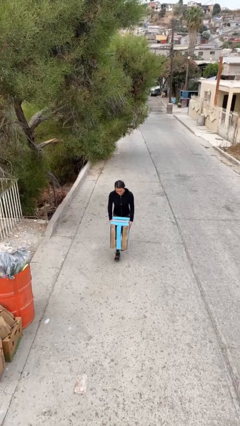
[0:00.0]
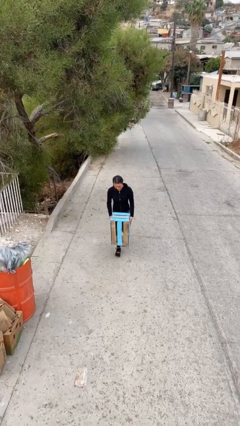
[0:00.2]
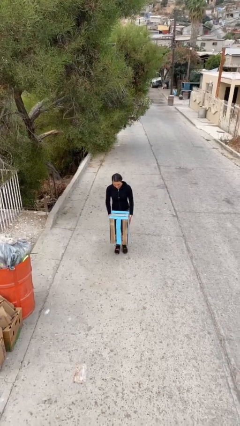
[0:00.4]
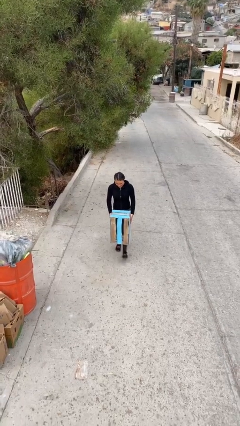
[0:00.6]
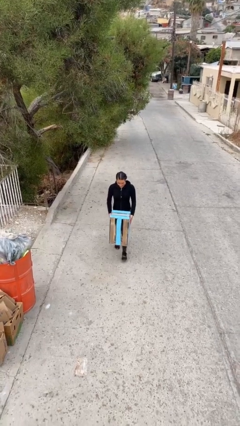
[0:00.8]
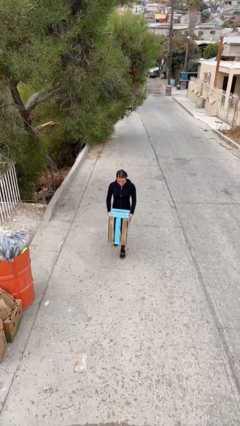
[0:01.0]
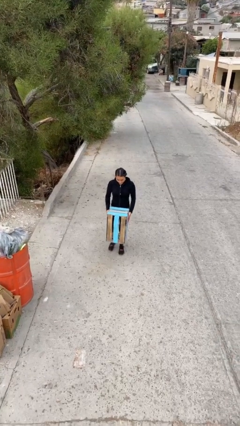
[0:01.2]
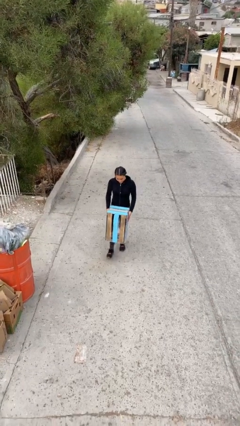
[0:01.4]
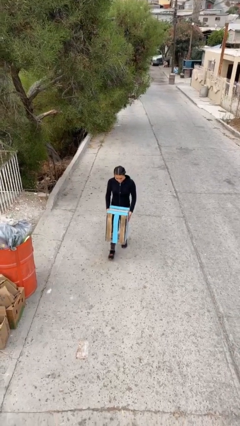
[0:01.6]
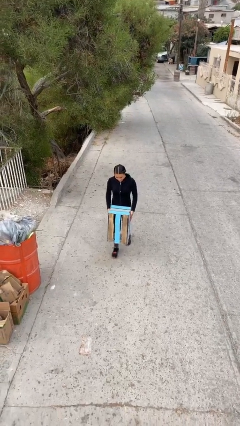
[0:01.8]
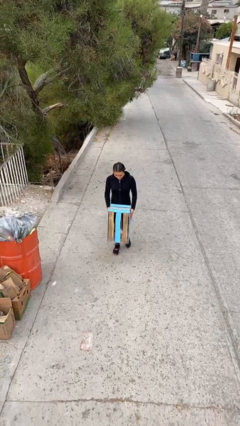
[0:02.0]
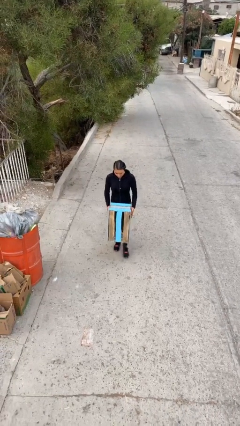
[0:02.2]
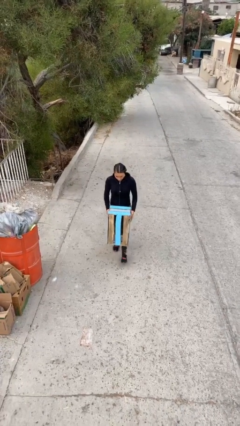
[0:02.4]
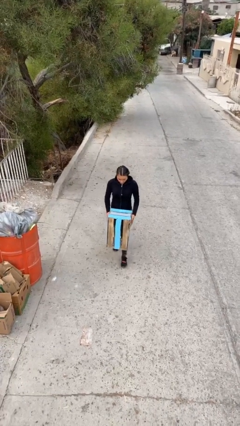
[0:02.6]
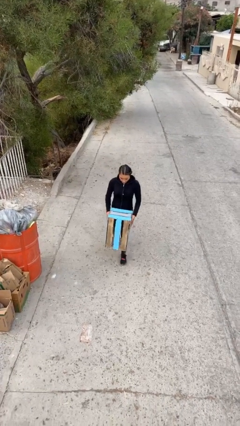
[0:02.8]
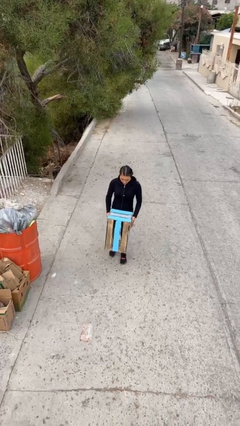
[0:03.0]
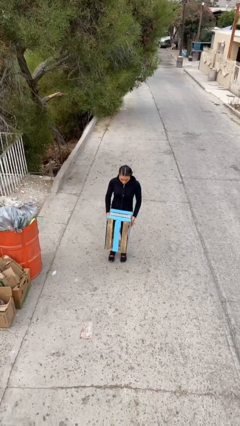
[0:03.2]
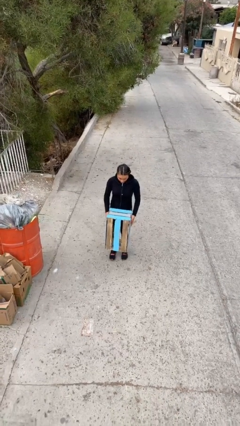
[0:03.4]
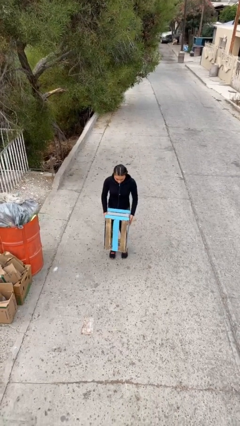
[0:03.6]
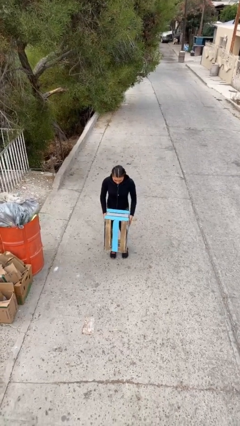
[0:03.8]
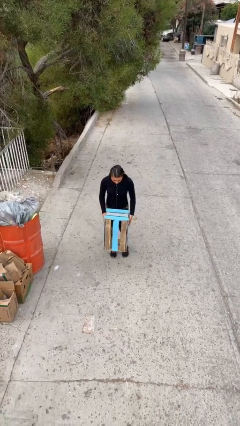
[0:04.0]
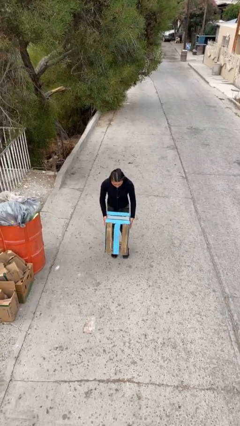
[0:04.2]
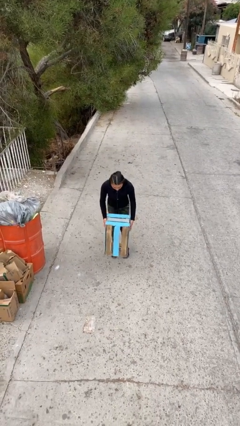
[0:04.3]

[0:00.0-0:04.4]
person carries heavy object

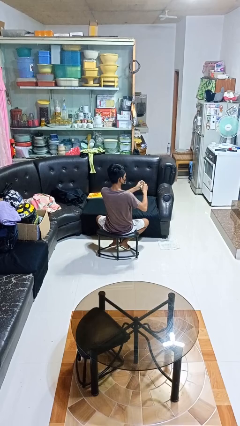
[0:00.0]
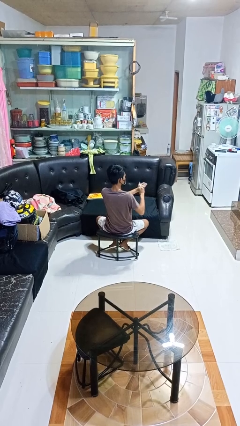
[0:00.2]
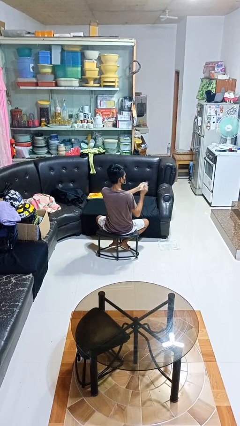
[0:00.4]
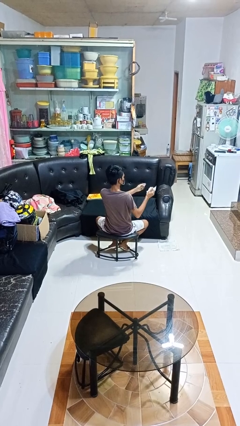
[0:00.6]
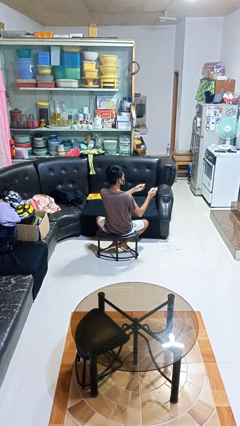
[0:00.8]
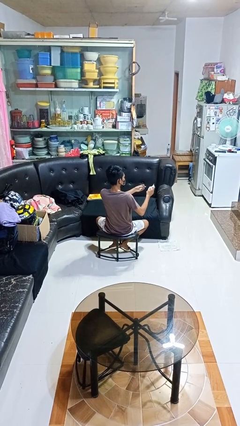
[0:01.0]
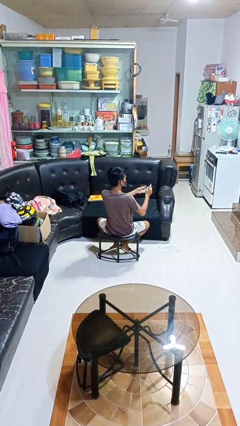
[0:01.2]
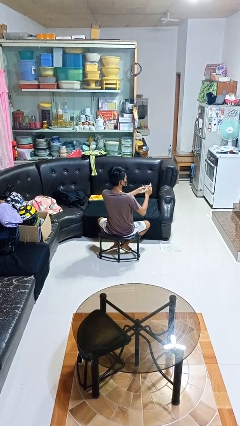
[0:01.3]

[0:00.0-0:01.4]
person tears paper

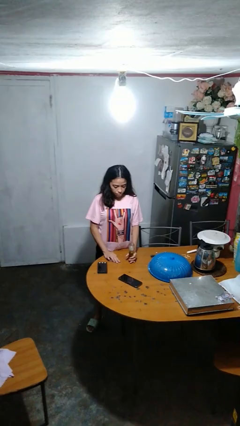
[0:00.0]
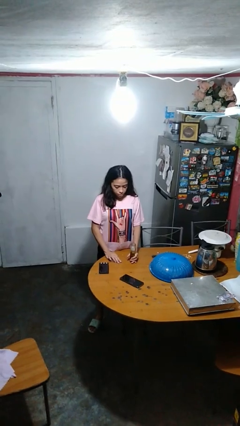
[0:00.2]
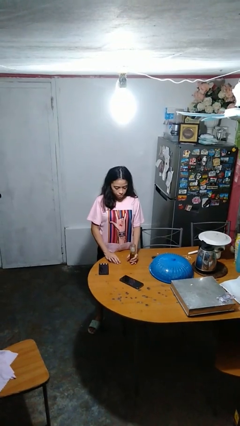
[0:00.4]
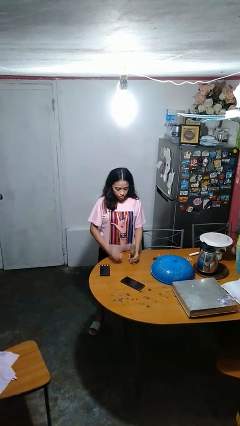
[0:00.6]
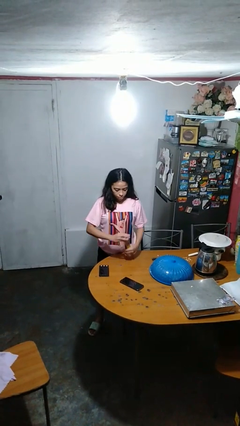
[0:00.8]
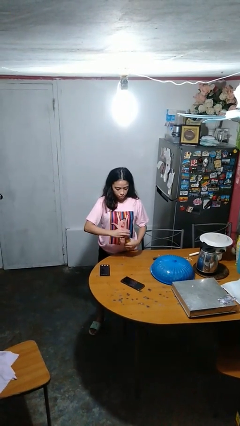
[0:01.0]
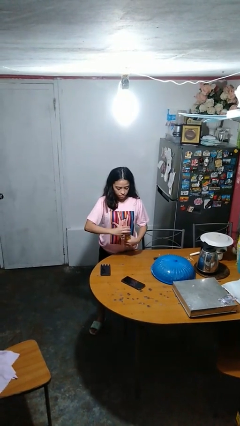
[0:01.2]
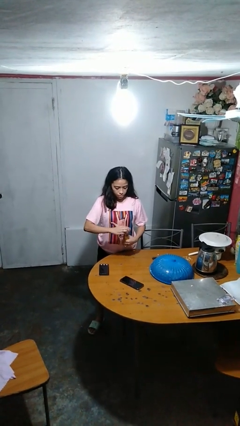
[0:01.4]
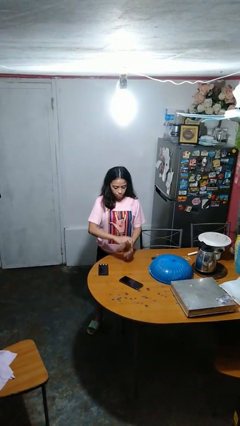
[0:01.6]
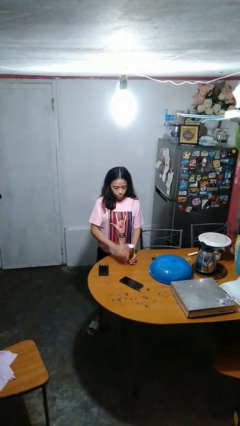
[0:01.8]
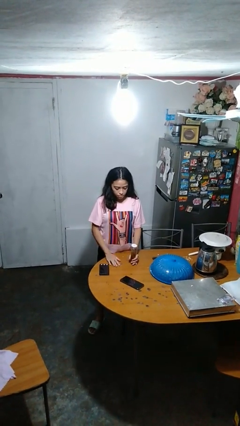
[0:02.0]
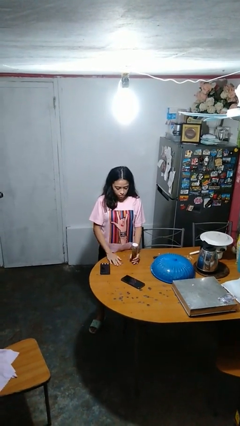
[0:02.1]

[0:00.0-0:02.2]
person closes jar

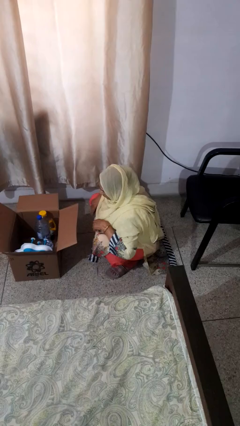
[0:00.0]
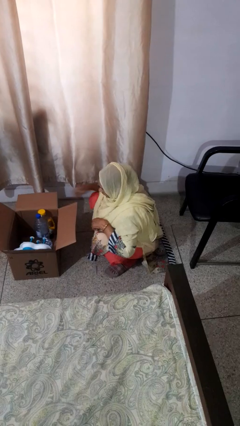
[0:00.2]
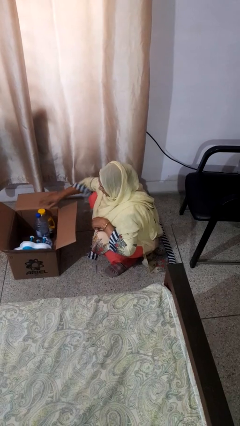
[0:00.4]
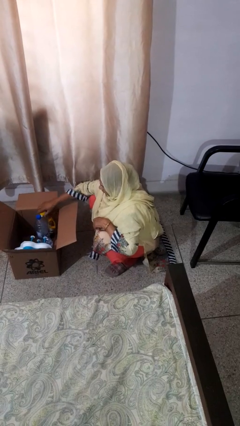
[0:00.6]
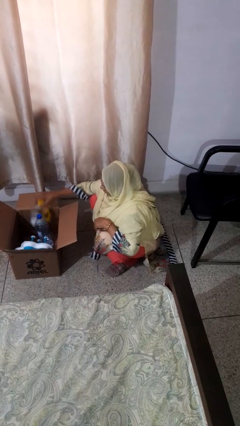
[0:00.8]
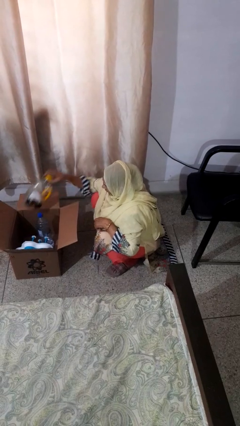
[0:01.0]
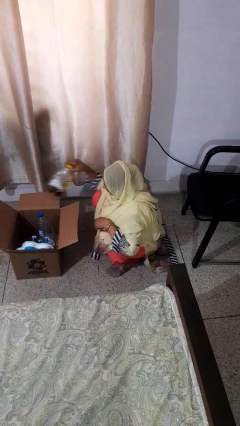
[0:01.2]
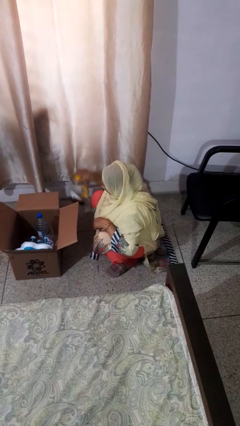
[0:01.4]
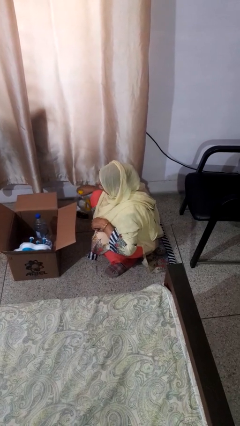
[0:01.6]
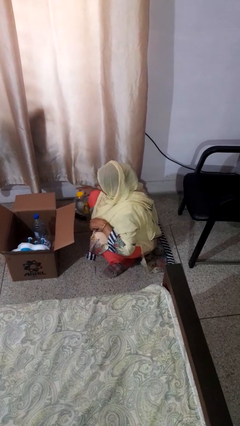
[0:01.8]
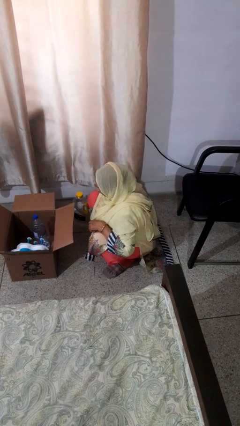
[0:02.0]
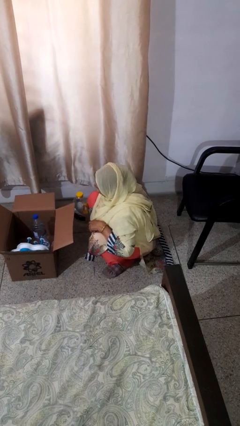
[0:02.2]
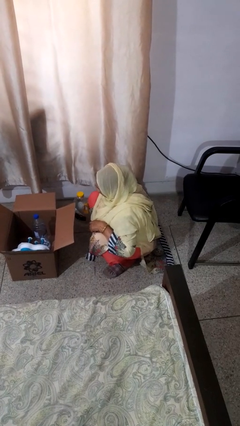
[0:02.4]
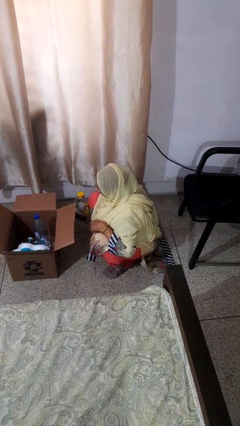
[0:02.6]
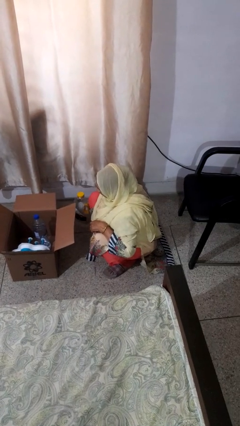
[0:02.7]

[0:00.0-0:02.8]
person takes object from box

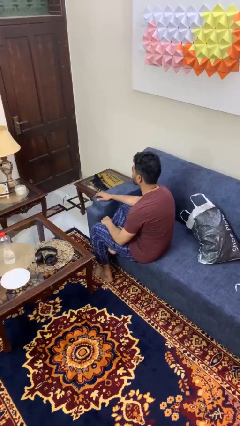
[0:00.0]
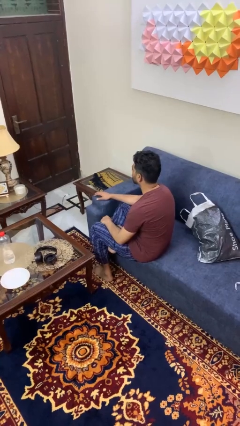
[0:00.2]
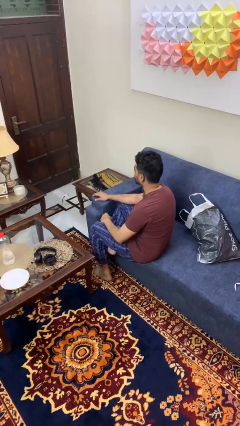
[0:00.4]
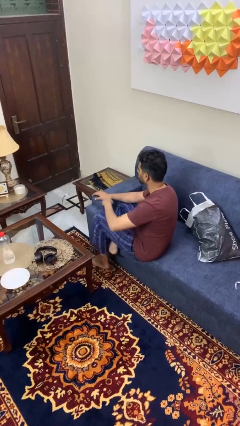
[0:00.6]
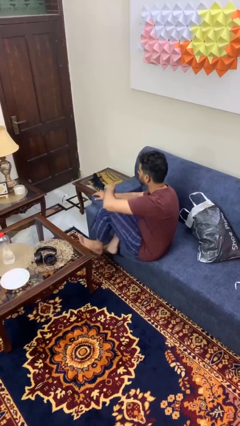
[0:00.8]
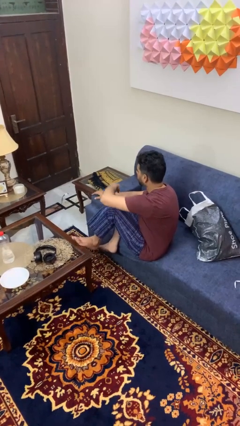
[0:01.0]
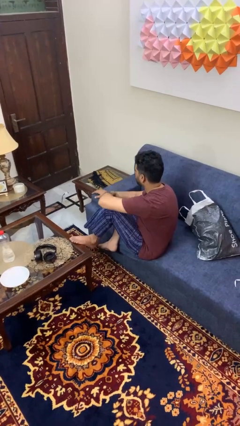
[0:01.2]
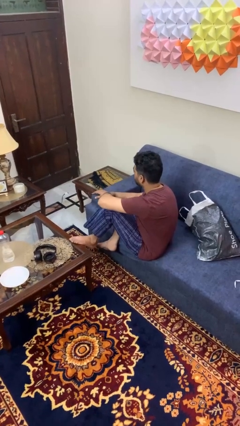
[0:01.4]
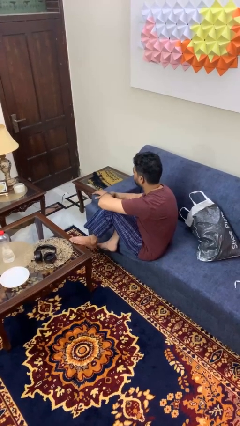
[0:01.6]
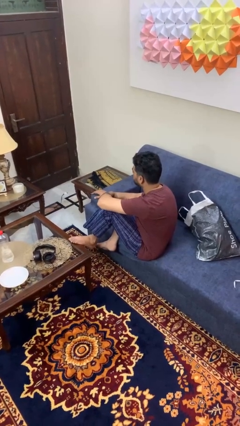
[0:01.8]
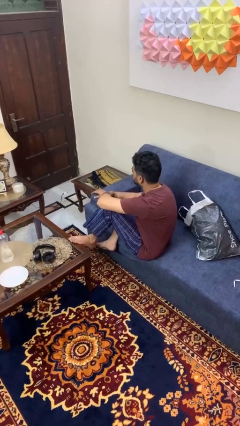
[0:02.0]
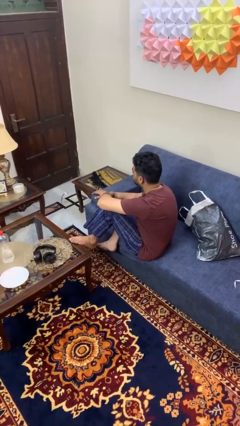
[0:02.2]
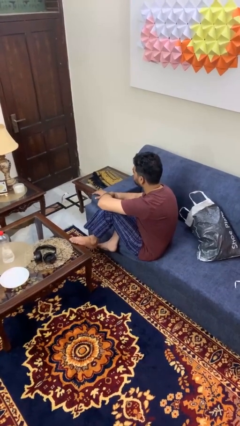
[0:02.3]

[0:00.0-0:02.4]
person puts feet up

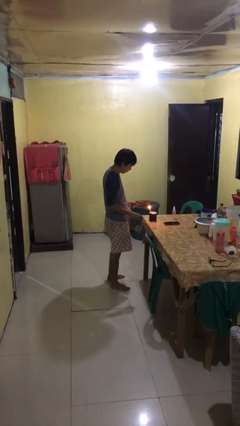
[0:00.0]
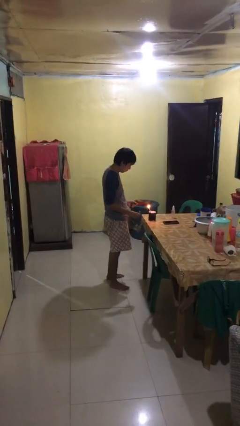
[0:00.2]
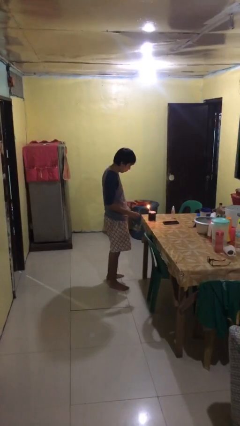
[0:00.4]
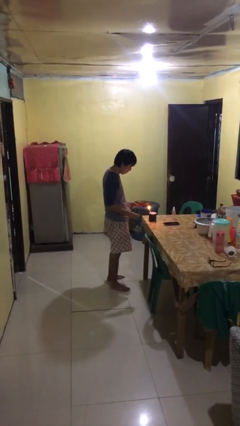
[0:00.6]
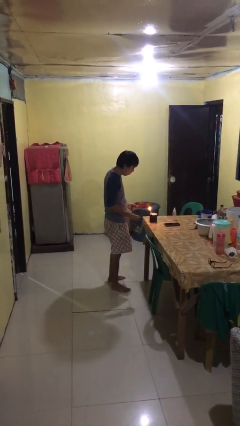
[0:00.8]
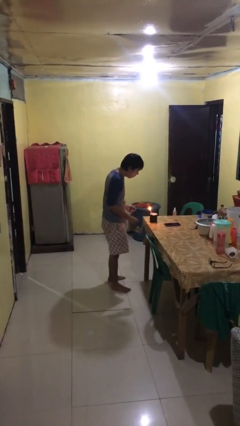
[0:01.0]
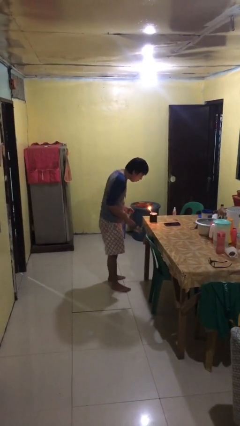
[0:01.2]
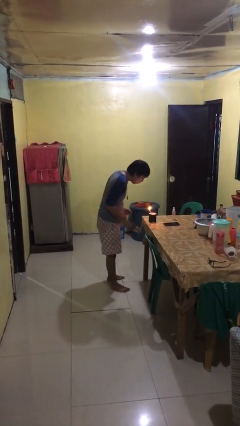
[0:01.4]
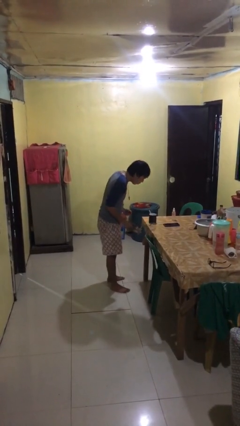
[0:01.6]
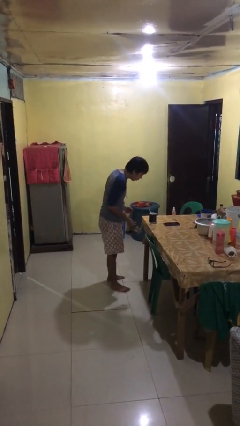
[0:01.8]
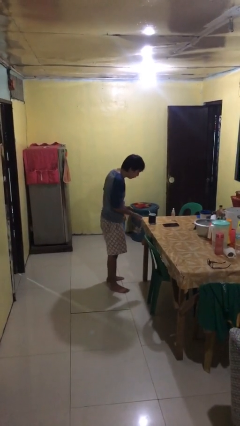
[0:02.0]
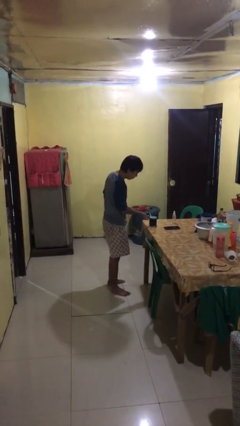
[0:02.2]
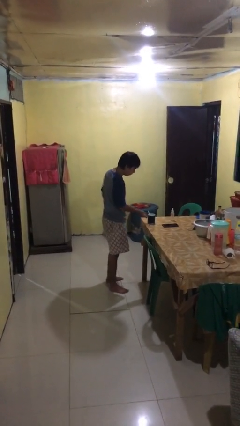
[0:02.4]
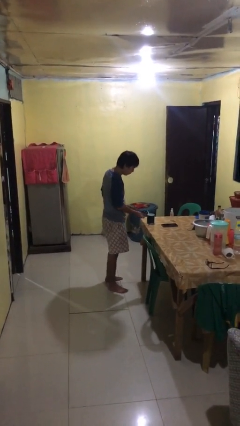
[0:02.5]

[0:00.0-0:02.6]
person extinguishes candle

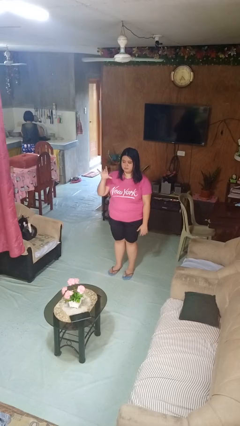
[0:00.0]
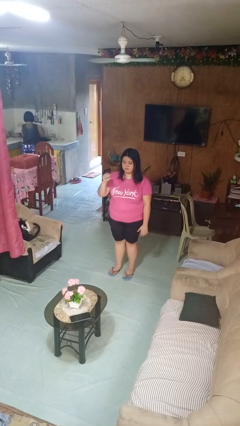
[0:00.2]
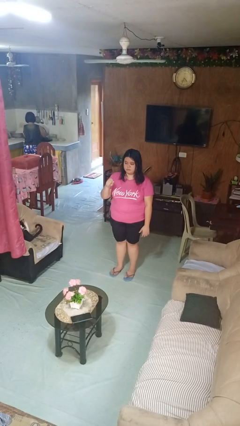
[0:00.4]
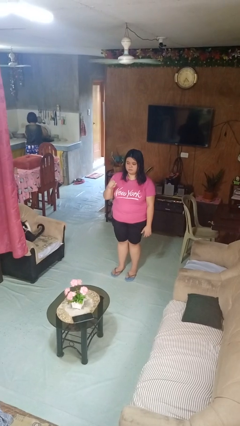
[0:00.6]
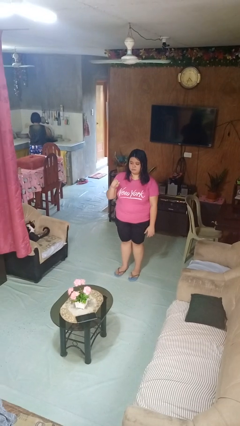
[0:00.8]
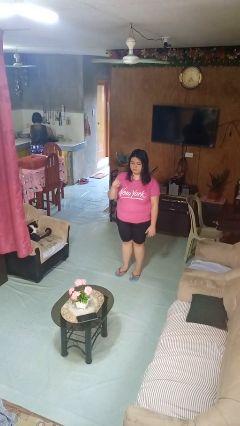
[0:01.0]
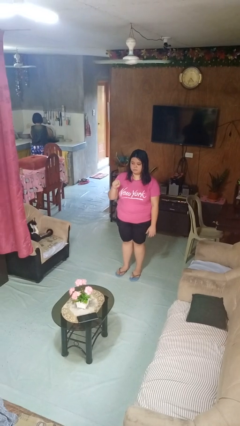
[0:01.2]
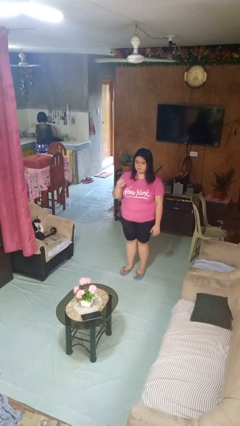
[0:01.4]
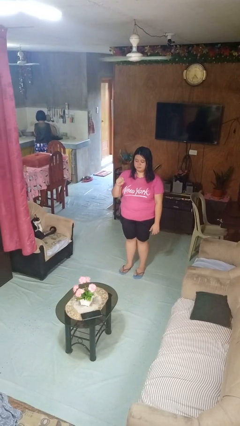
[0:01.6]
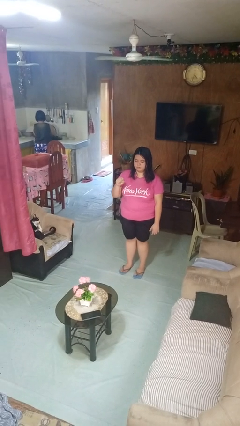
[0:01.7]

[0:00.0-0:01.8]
person gestures zoom out
